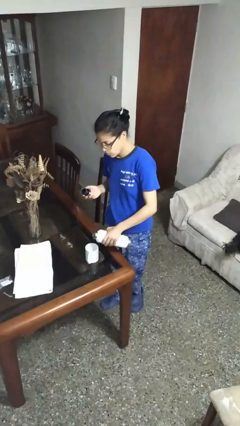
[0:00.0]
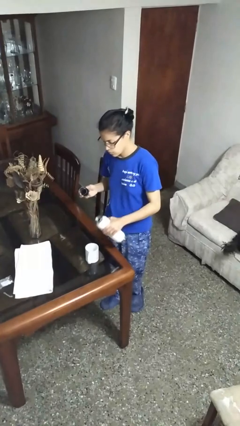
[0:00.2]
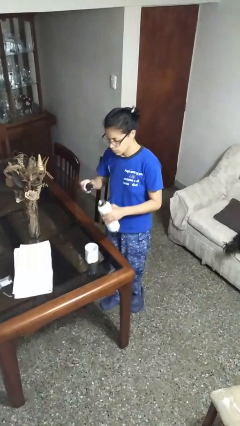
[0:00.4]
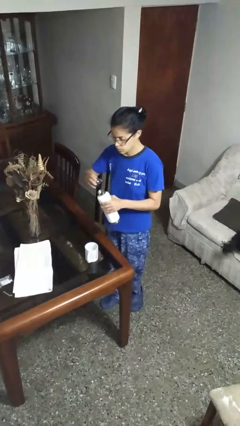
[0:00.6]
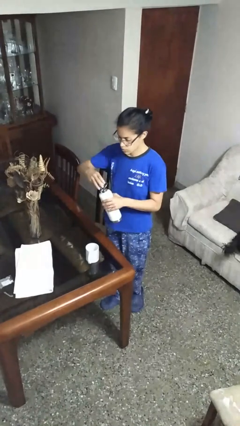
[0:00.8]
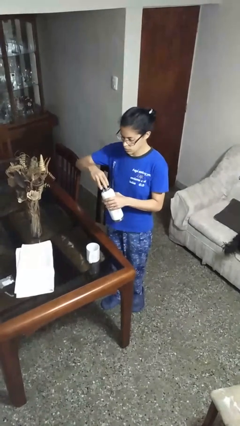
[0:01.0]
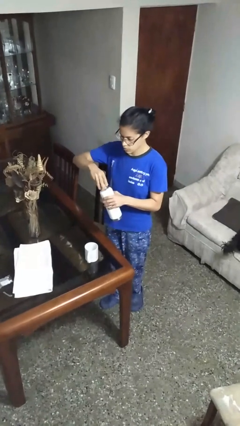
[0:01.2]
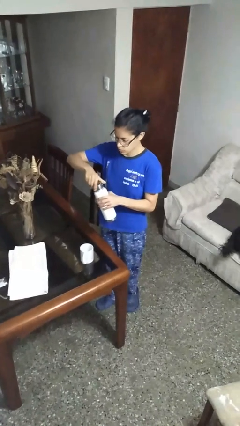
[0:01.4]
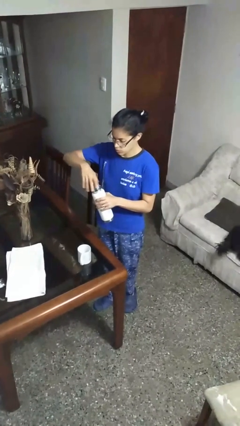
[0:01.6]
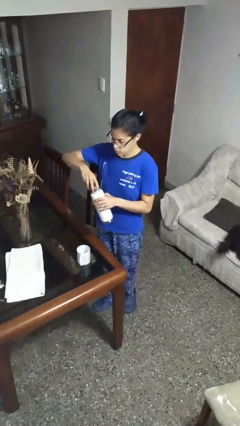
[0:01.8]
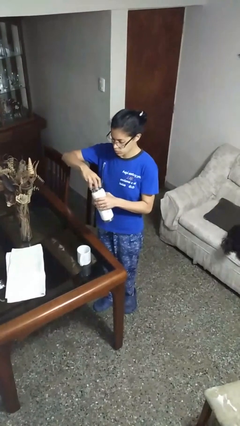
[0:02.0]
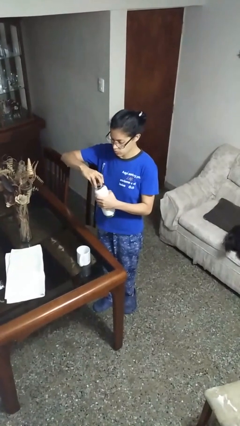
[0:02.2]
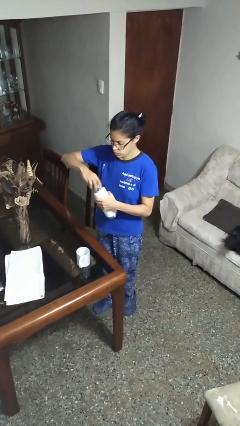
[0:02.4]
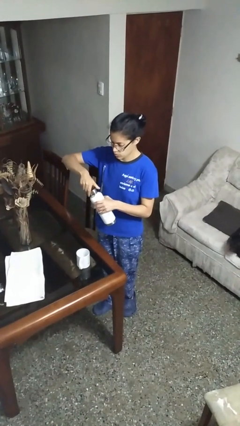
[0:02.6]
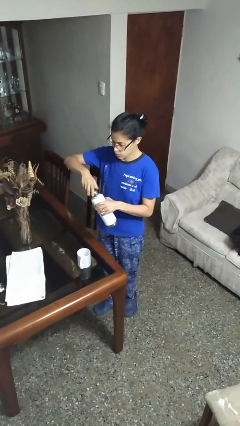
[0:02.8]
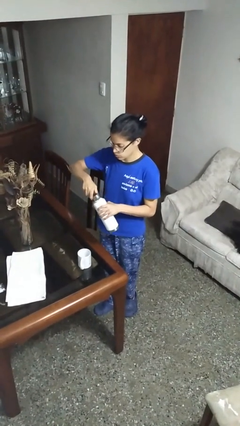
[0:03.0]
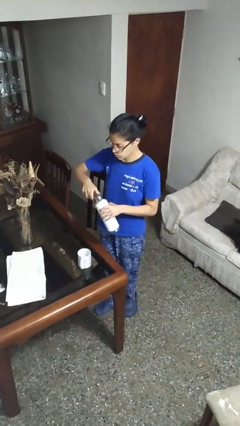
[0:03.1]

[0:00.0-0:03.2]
person screws lid to bottle

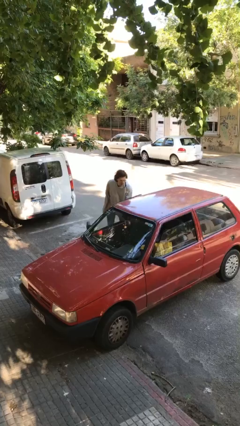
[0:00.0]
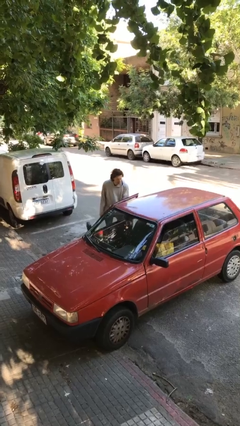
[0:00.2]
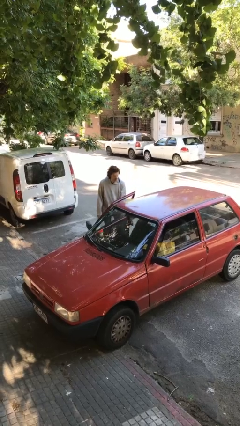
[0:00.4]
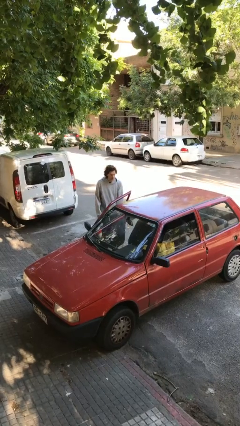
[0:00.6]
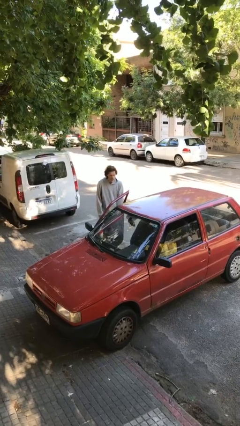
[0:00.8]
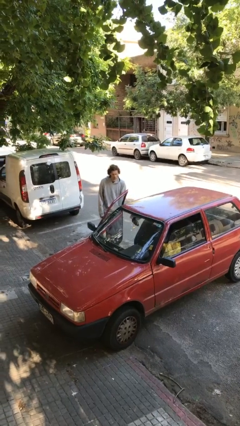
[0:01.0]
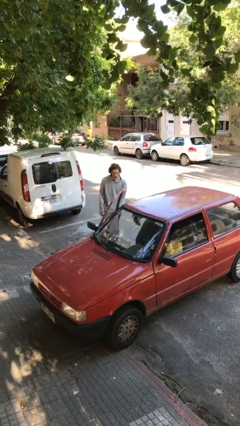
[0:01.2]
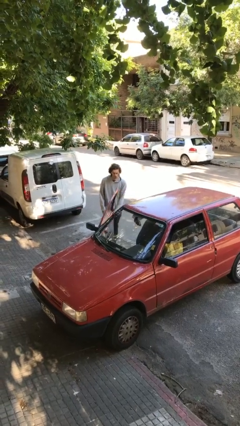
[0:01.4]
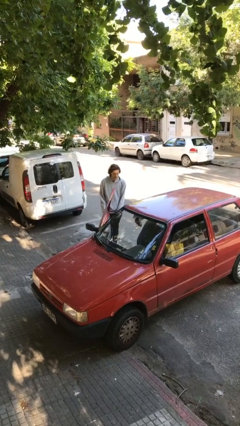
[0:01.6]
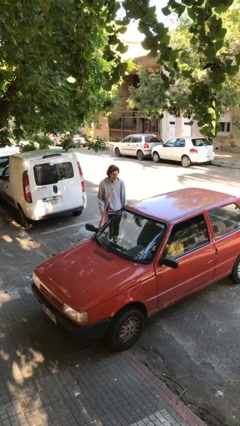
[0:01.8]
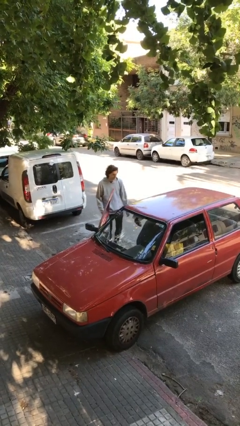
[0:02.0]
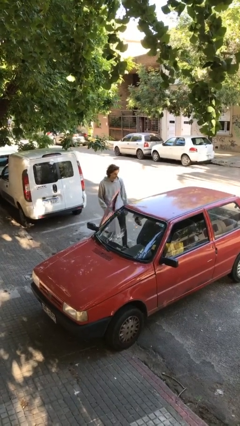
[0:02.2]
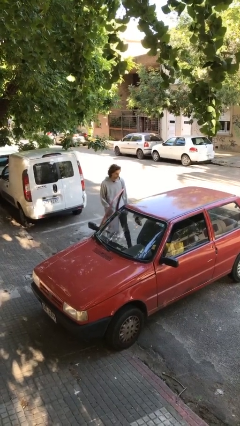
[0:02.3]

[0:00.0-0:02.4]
person opens car door

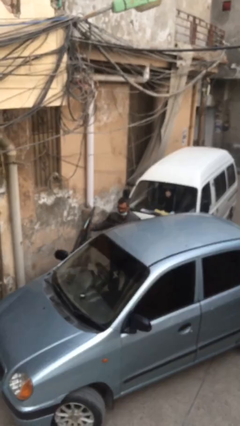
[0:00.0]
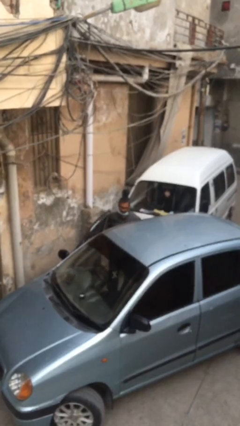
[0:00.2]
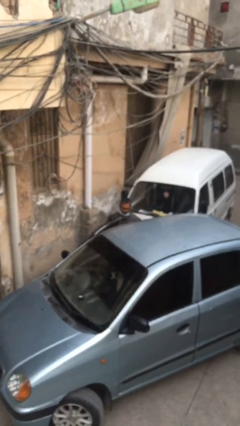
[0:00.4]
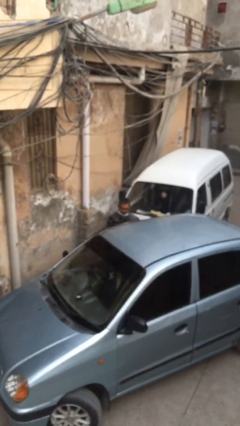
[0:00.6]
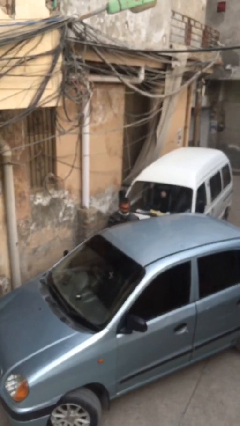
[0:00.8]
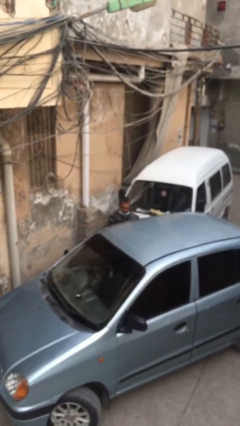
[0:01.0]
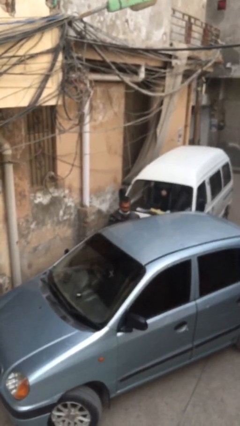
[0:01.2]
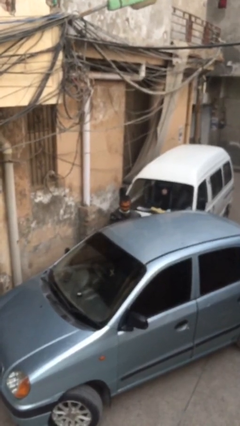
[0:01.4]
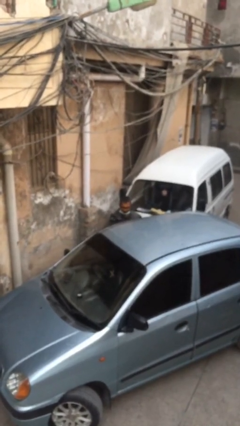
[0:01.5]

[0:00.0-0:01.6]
person closes car door

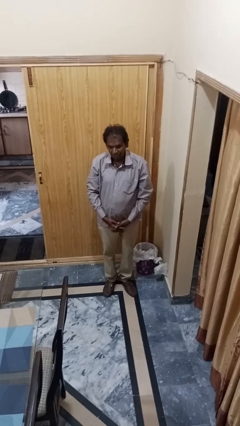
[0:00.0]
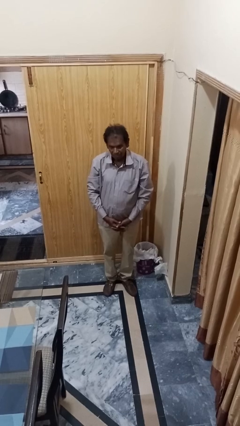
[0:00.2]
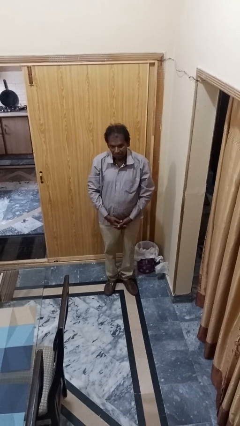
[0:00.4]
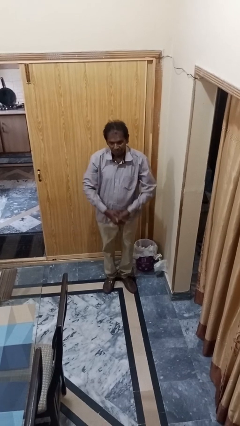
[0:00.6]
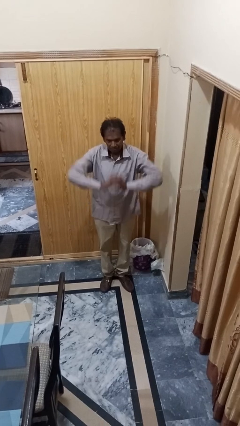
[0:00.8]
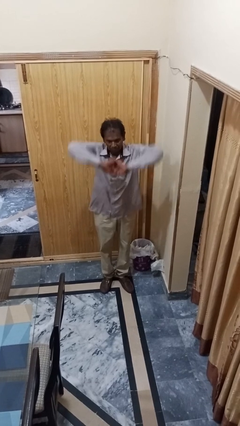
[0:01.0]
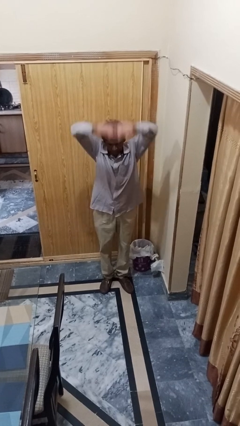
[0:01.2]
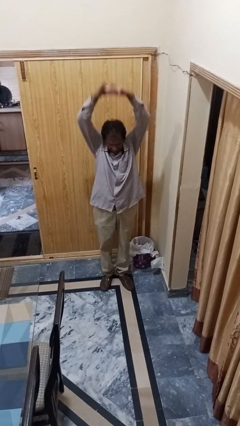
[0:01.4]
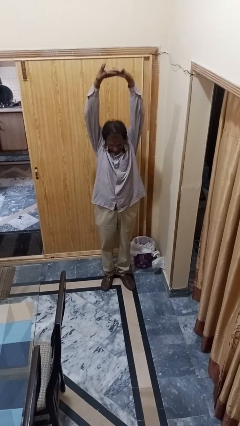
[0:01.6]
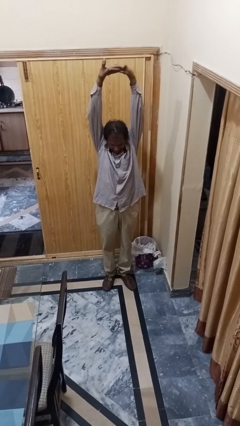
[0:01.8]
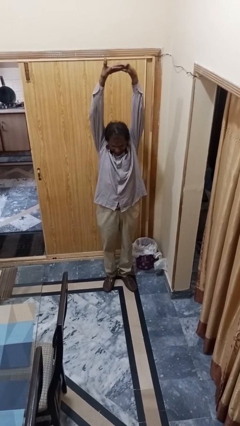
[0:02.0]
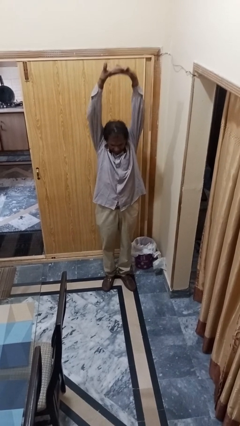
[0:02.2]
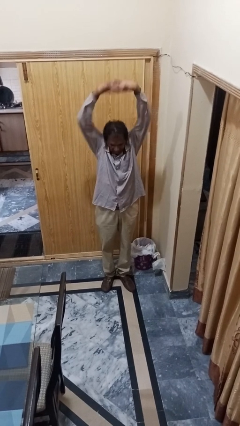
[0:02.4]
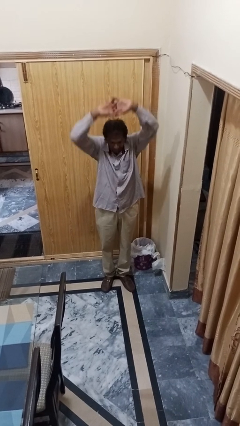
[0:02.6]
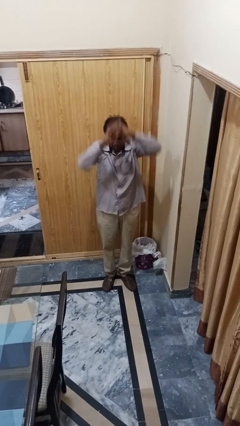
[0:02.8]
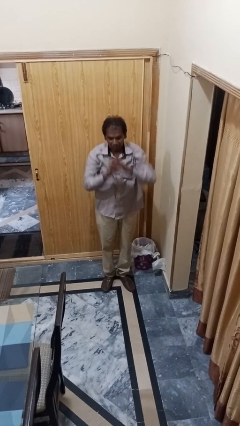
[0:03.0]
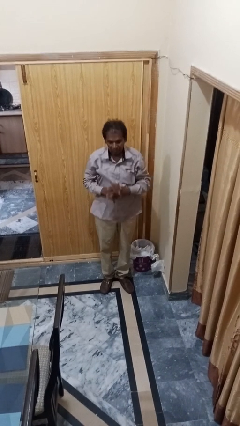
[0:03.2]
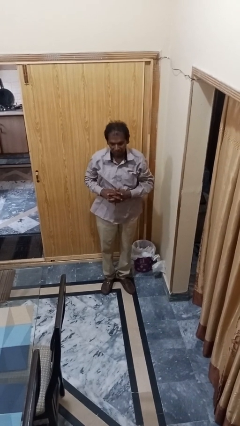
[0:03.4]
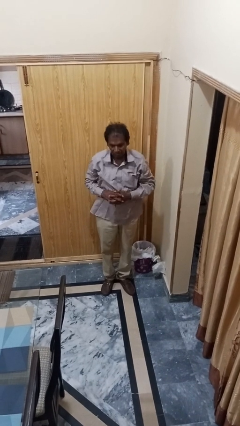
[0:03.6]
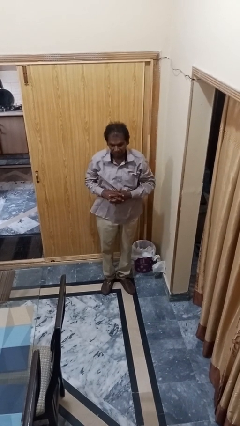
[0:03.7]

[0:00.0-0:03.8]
person cracks knuckles

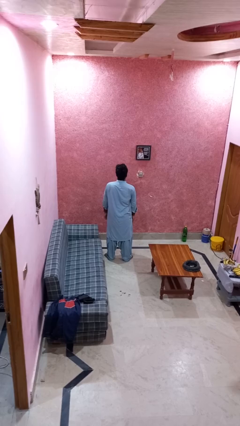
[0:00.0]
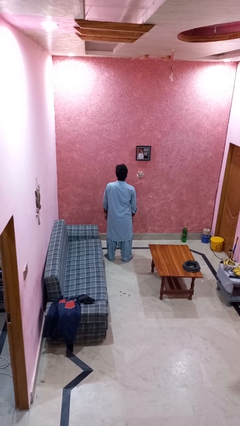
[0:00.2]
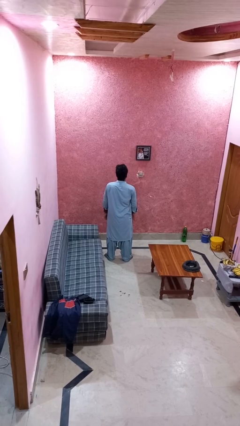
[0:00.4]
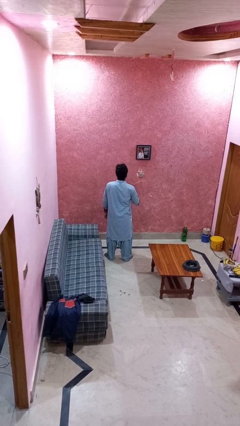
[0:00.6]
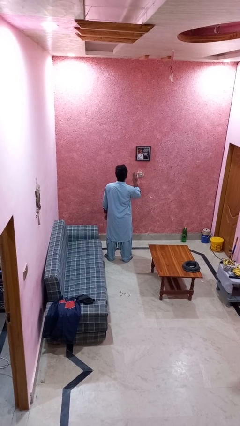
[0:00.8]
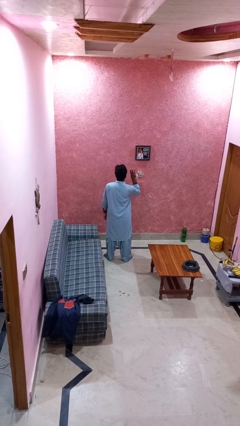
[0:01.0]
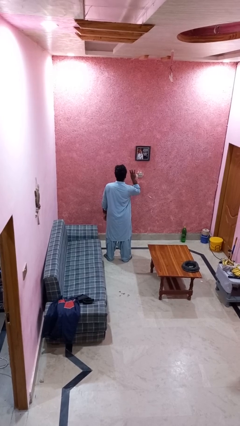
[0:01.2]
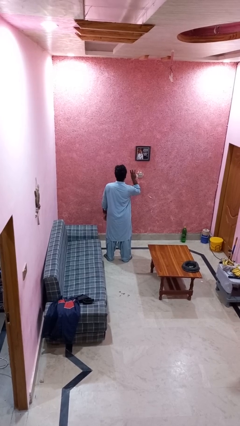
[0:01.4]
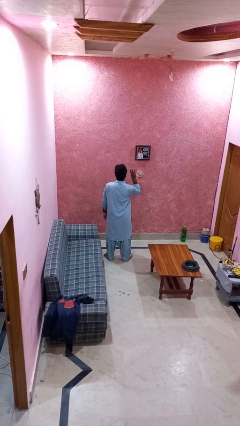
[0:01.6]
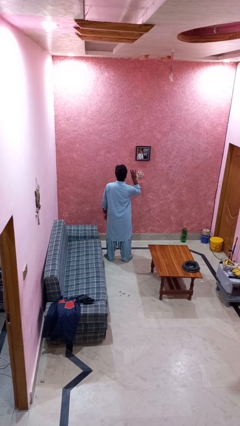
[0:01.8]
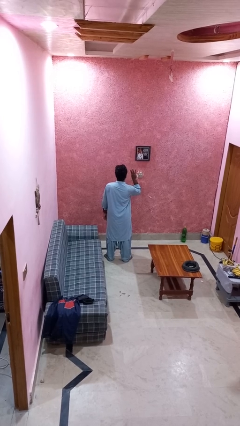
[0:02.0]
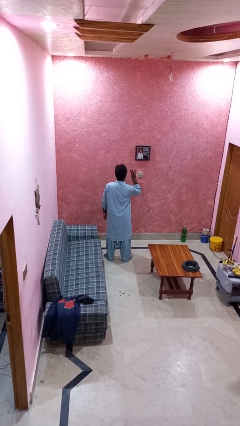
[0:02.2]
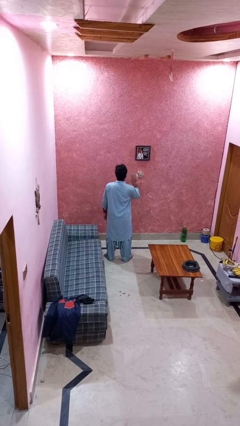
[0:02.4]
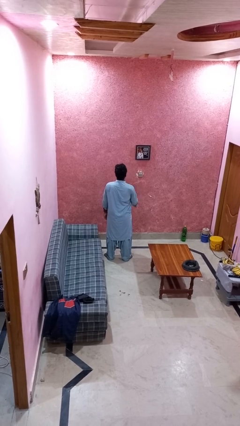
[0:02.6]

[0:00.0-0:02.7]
person gestures number three

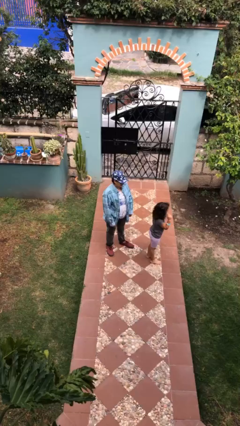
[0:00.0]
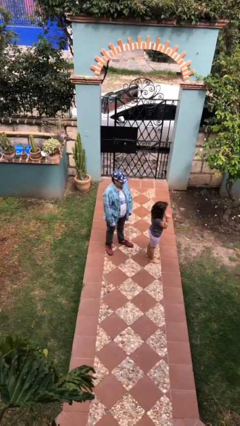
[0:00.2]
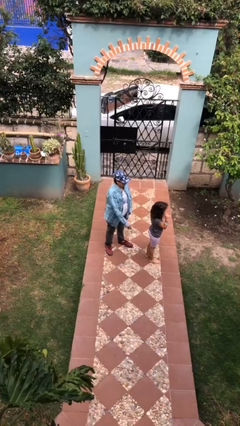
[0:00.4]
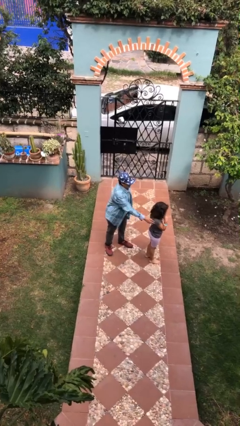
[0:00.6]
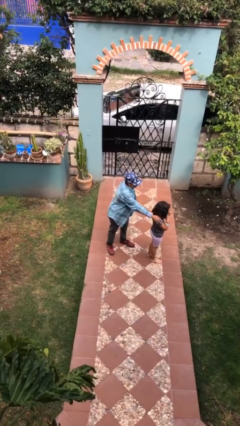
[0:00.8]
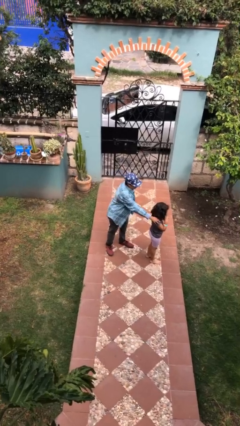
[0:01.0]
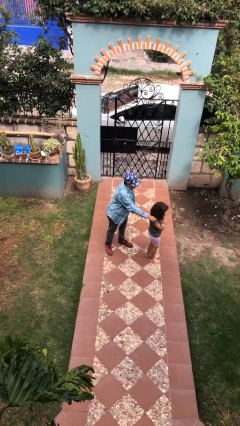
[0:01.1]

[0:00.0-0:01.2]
person grabs person by shoulder

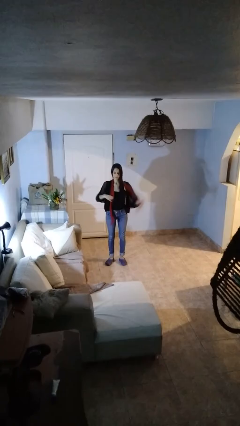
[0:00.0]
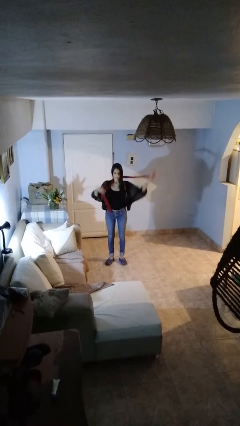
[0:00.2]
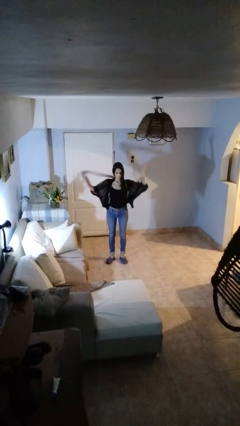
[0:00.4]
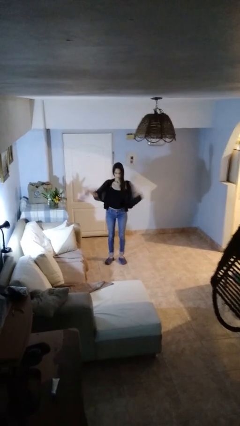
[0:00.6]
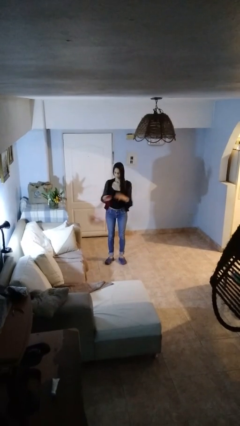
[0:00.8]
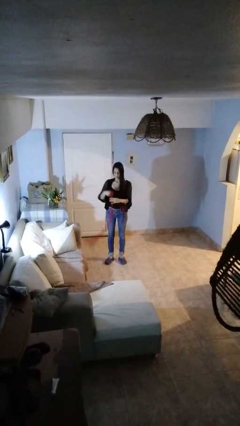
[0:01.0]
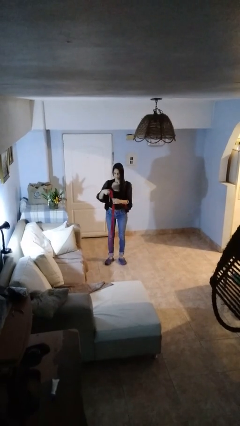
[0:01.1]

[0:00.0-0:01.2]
person takes off scarf

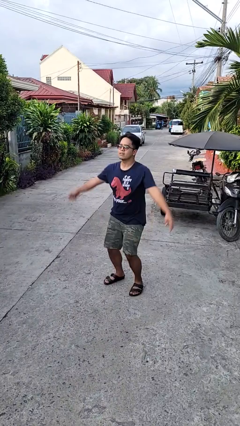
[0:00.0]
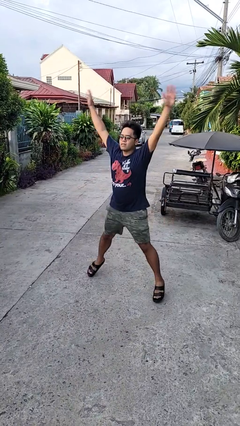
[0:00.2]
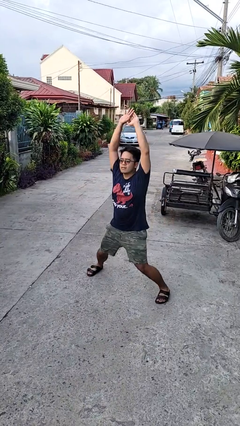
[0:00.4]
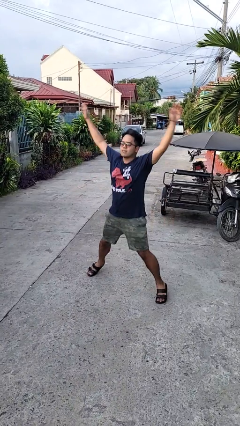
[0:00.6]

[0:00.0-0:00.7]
person exercises with jumping jacks

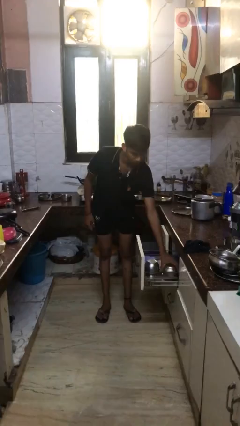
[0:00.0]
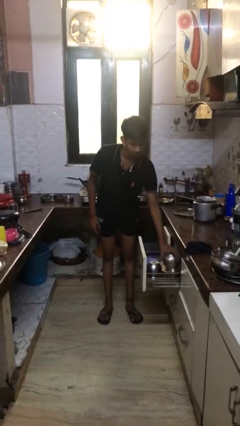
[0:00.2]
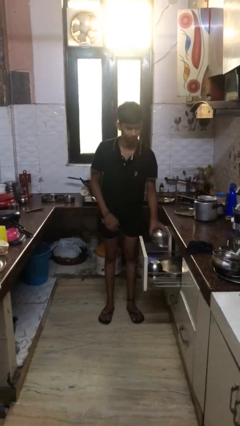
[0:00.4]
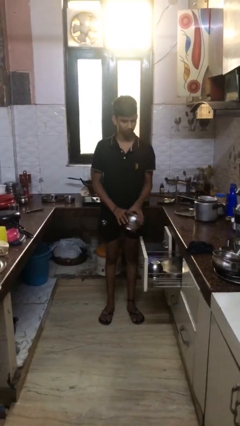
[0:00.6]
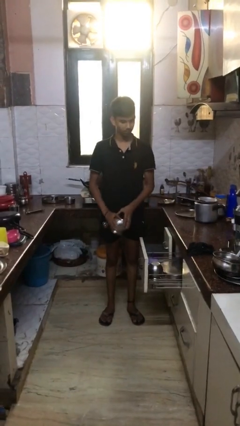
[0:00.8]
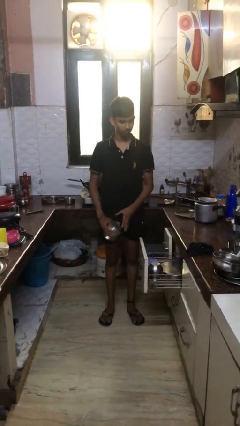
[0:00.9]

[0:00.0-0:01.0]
person takes object from kitchen drawer
